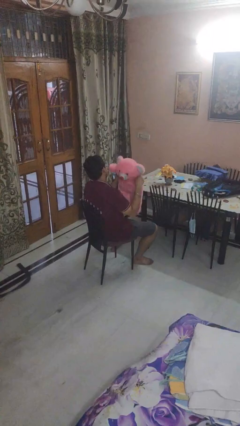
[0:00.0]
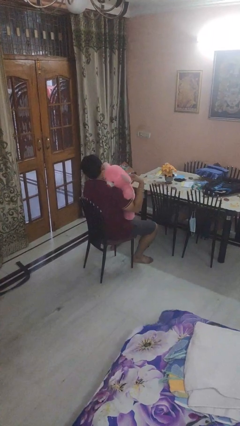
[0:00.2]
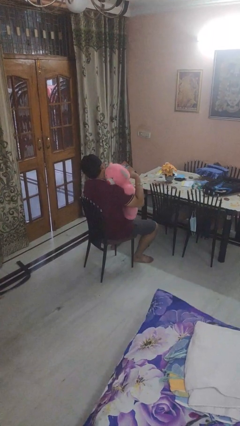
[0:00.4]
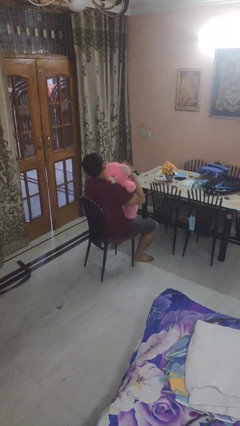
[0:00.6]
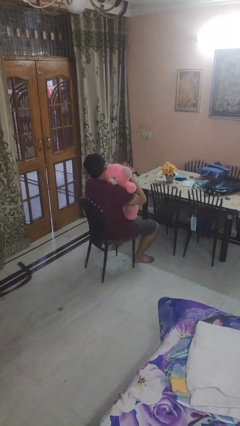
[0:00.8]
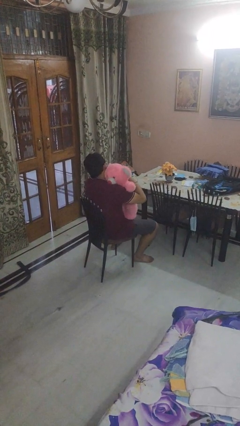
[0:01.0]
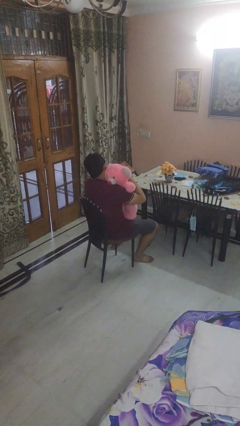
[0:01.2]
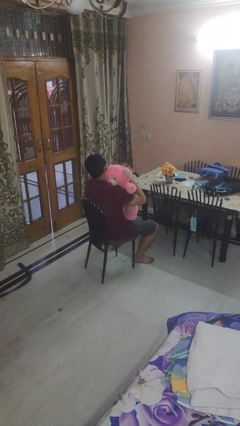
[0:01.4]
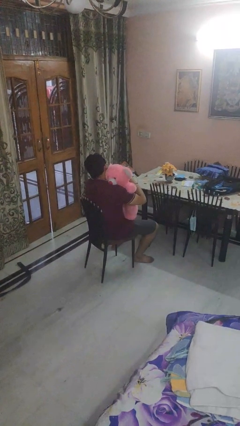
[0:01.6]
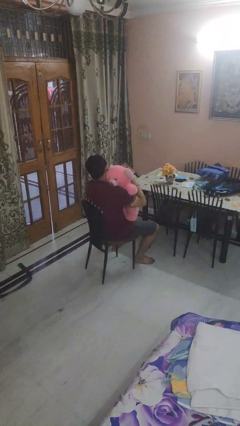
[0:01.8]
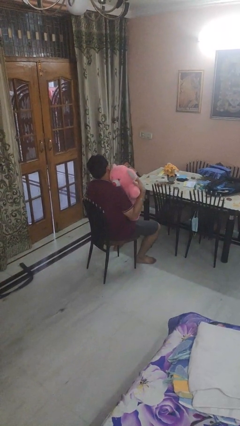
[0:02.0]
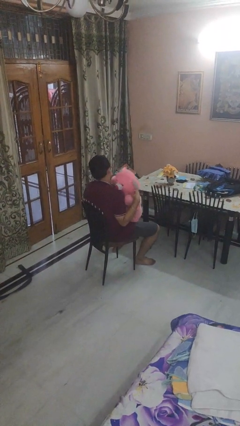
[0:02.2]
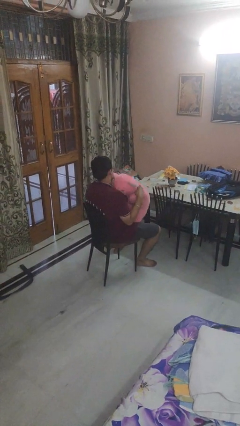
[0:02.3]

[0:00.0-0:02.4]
person hugs stuffed animal

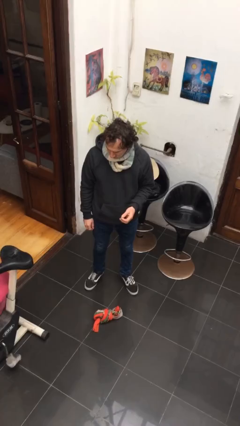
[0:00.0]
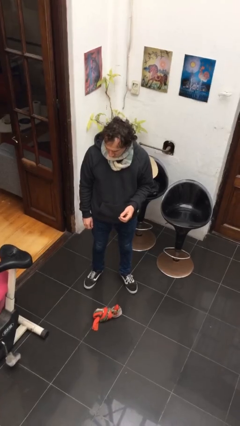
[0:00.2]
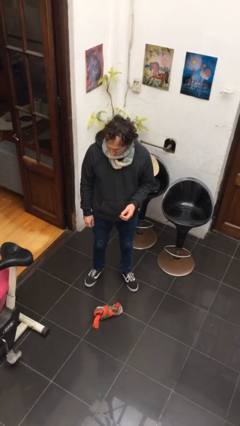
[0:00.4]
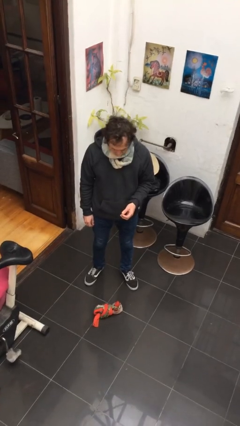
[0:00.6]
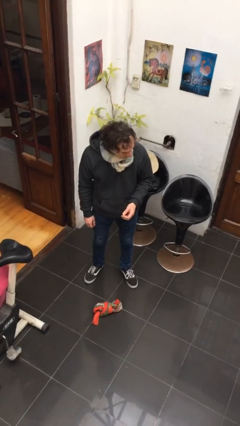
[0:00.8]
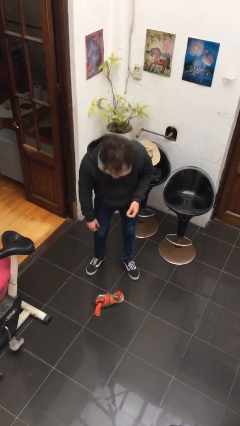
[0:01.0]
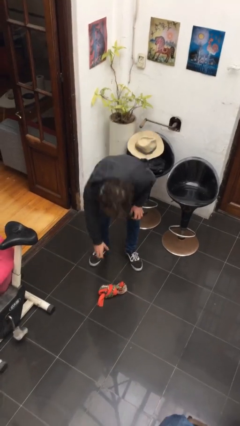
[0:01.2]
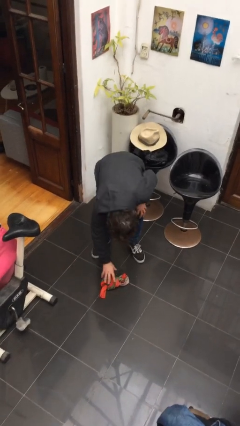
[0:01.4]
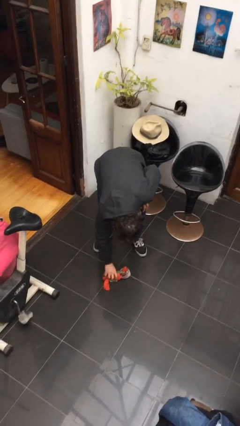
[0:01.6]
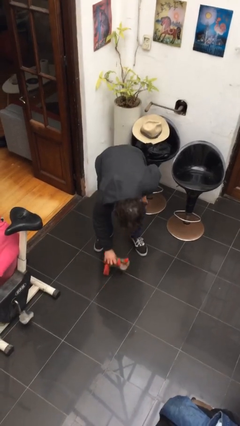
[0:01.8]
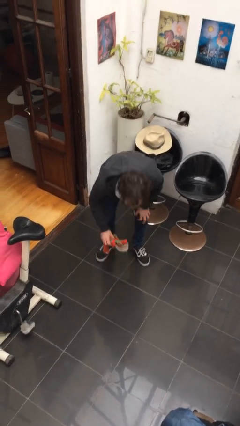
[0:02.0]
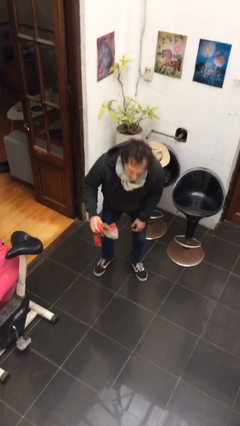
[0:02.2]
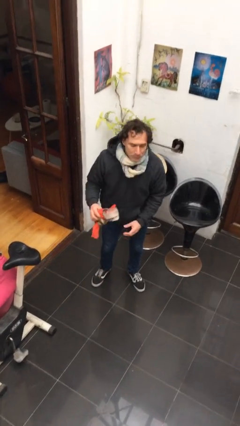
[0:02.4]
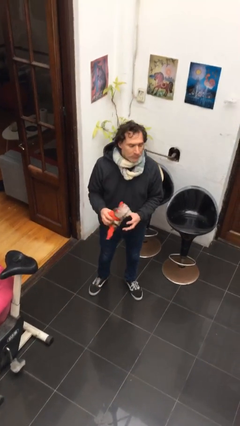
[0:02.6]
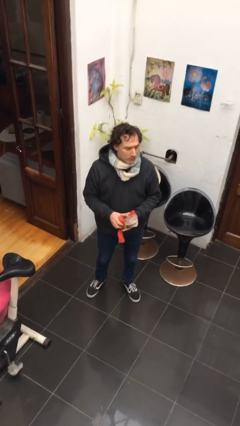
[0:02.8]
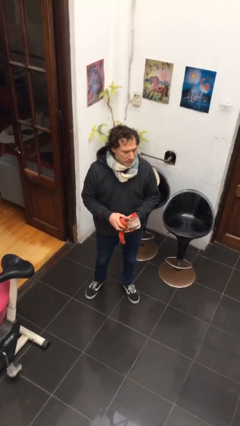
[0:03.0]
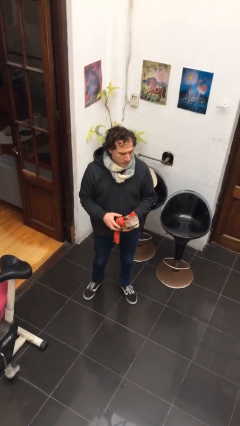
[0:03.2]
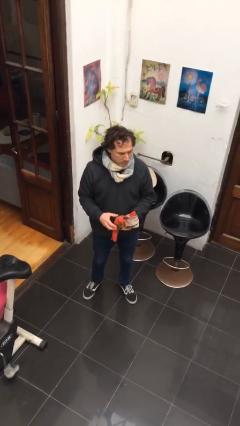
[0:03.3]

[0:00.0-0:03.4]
person picks up object from floor

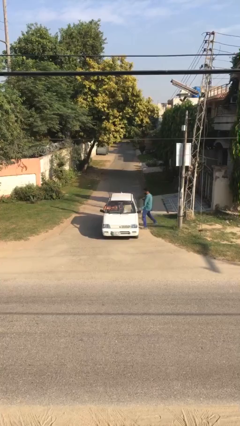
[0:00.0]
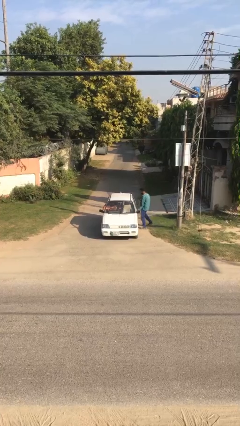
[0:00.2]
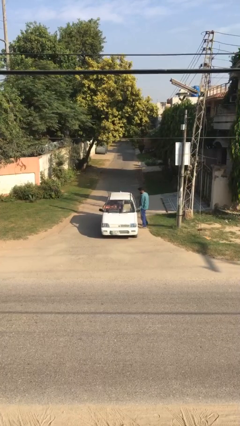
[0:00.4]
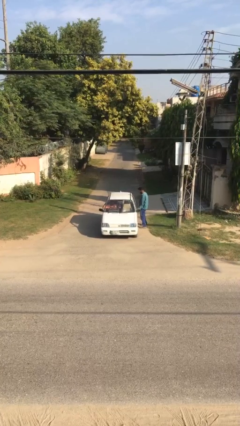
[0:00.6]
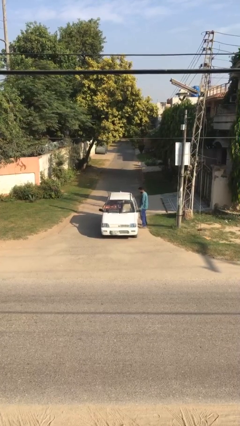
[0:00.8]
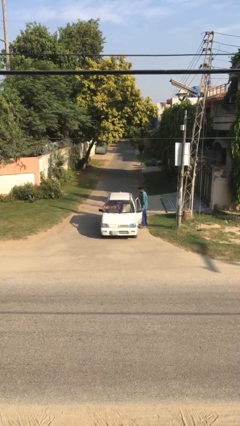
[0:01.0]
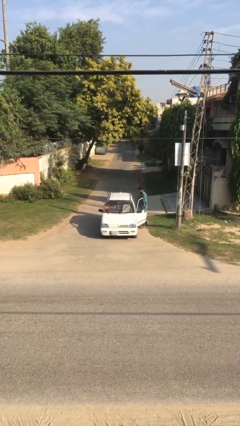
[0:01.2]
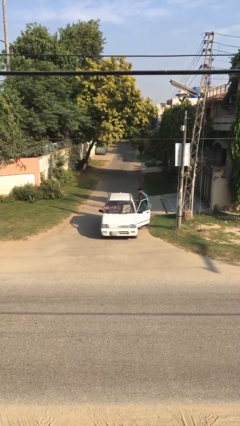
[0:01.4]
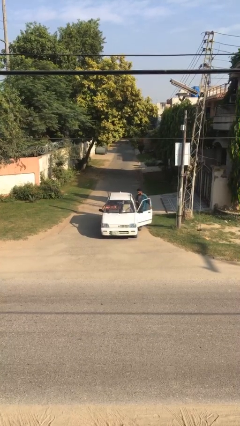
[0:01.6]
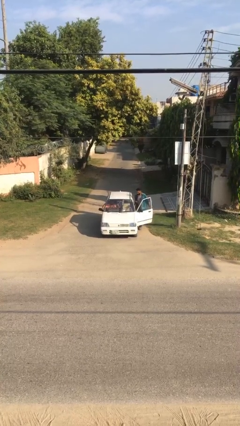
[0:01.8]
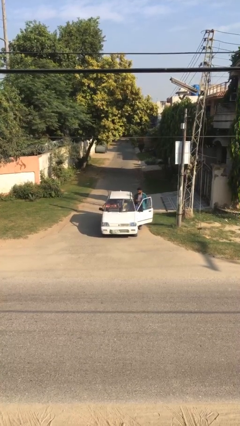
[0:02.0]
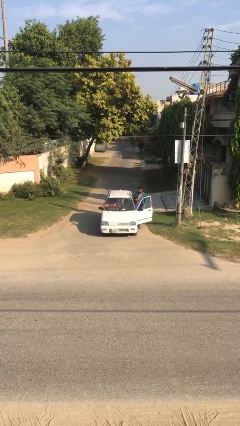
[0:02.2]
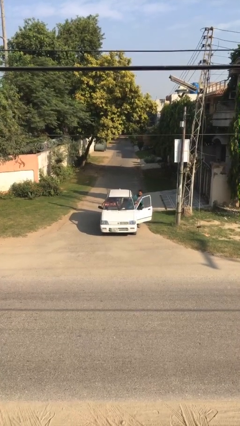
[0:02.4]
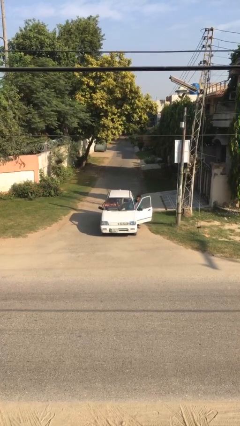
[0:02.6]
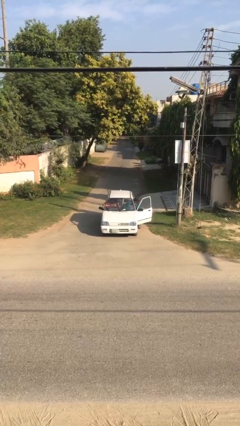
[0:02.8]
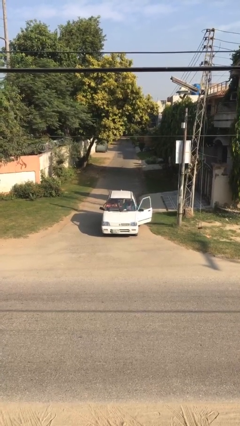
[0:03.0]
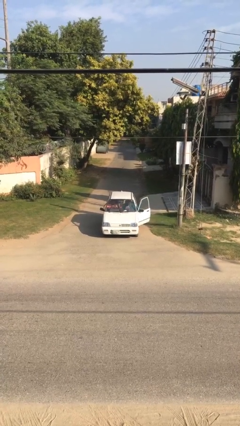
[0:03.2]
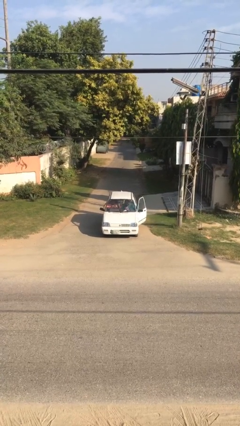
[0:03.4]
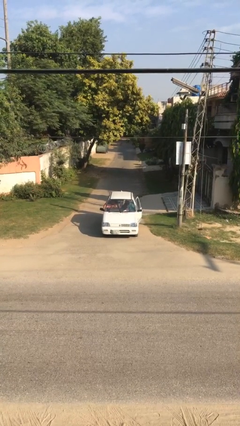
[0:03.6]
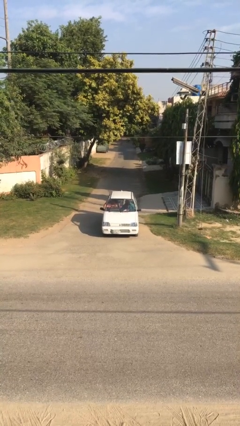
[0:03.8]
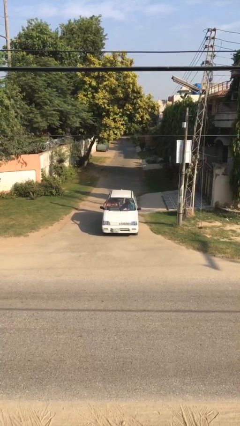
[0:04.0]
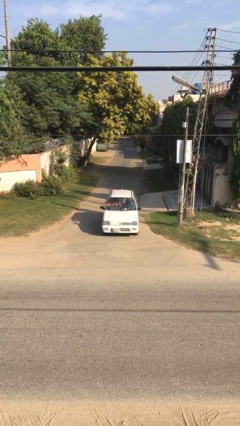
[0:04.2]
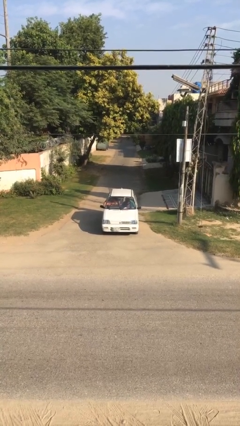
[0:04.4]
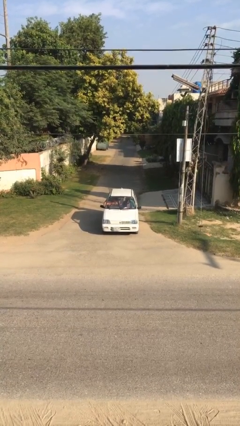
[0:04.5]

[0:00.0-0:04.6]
car picks up person

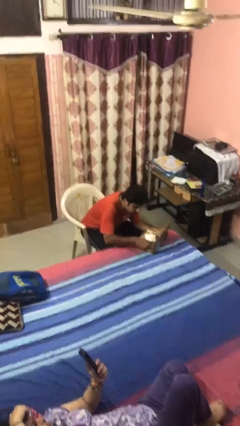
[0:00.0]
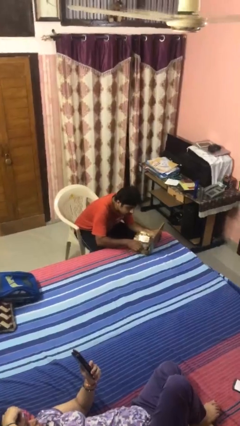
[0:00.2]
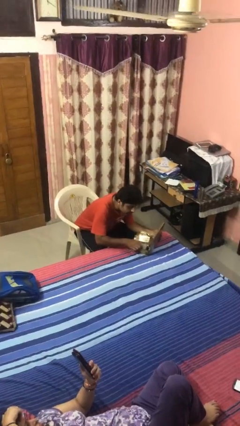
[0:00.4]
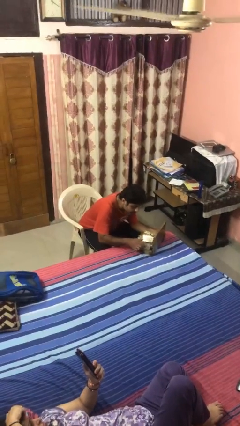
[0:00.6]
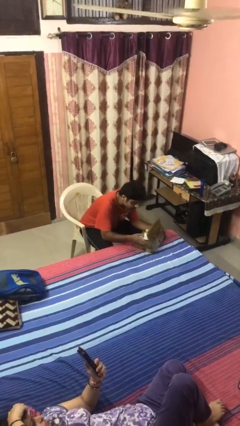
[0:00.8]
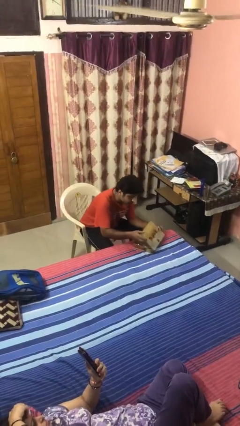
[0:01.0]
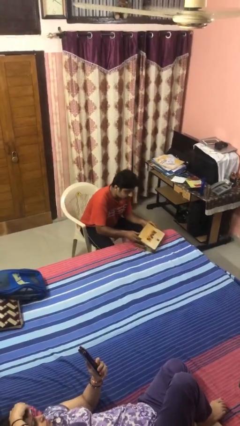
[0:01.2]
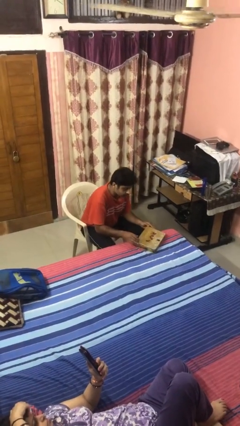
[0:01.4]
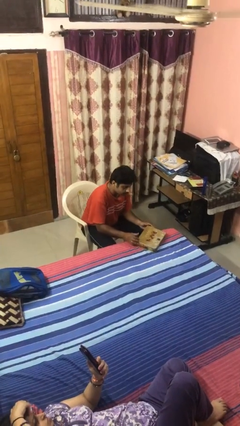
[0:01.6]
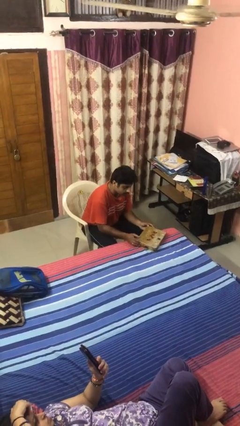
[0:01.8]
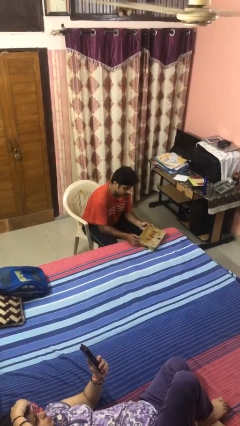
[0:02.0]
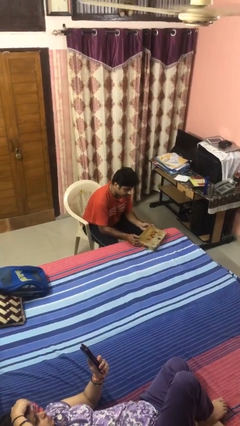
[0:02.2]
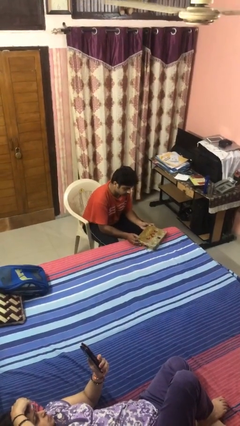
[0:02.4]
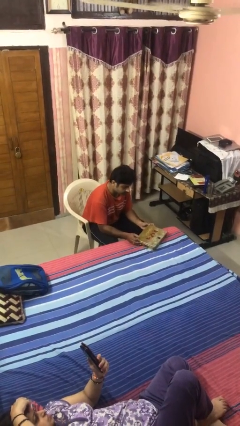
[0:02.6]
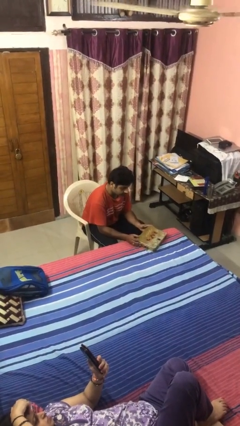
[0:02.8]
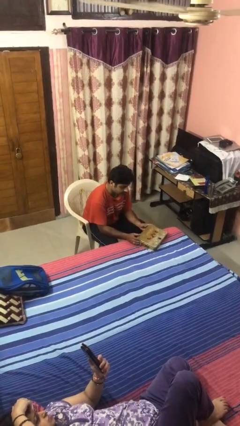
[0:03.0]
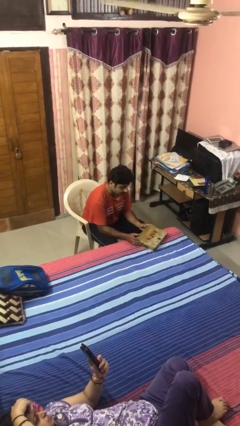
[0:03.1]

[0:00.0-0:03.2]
person closes jewelry box

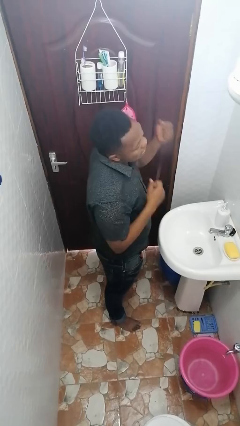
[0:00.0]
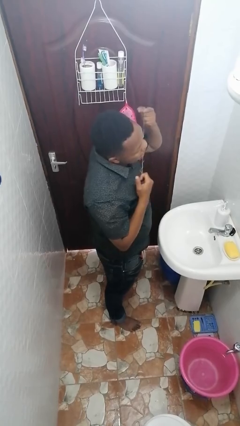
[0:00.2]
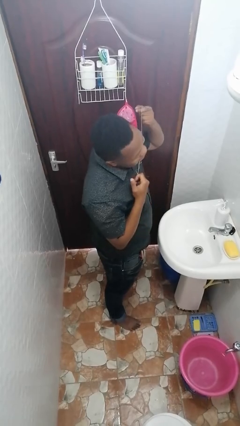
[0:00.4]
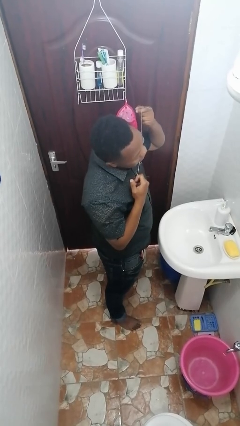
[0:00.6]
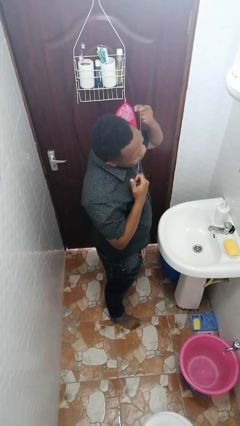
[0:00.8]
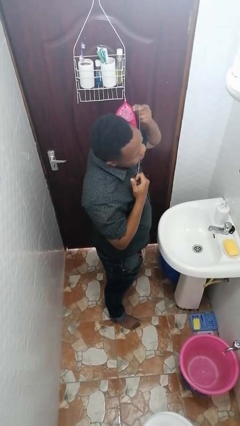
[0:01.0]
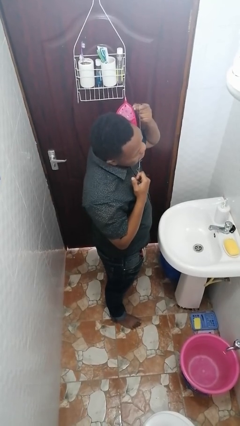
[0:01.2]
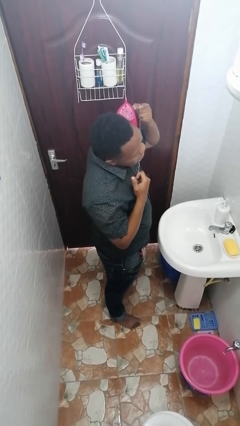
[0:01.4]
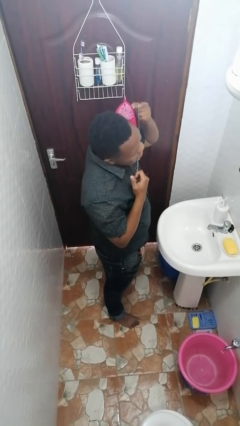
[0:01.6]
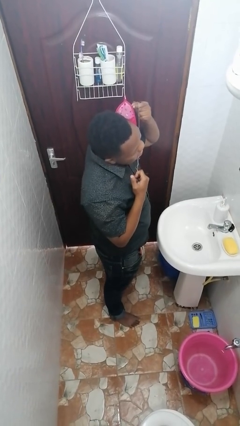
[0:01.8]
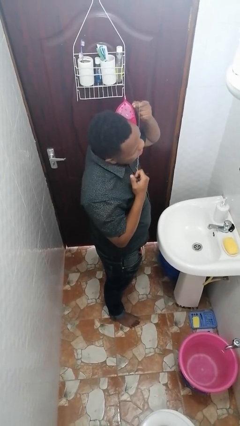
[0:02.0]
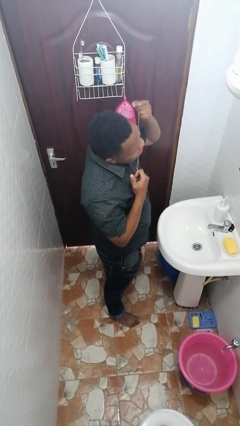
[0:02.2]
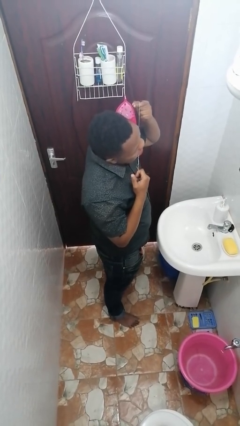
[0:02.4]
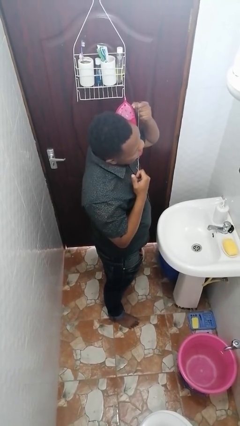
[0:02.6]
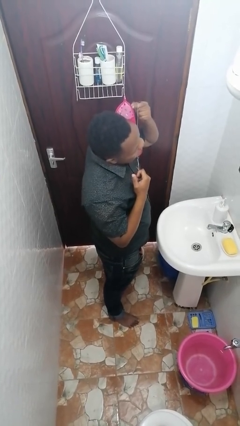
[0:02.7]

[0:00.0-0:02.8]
person flosses

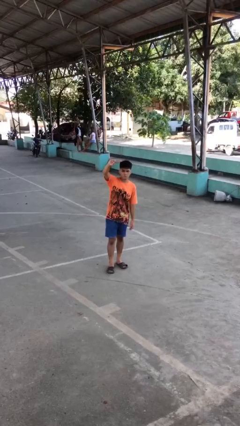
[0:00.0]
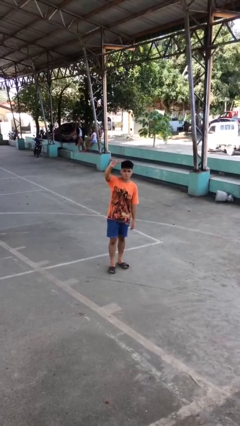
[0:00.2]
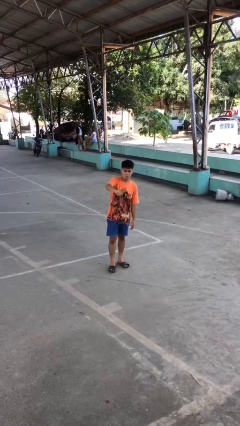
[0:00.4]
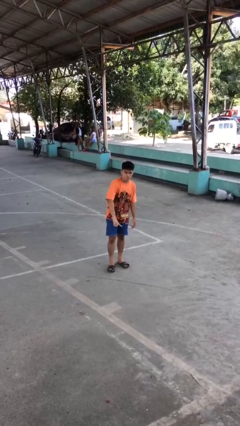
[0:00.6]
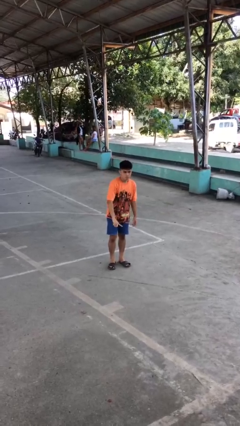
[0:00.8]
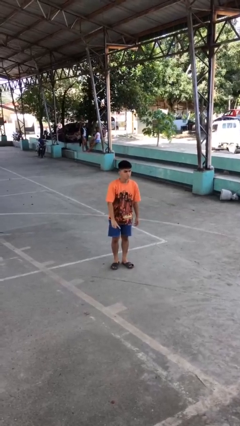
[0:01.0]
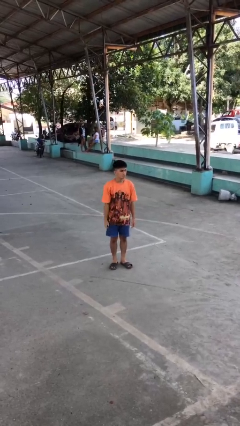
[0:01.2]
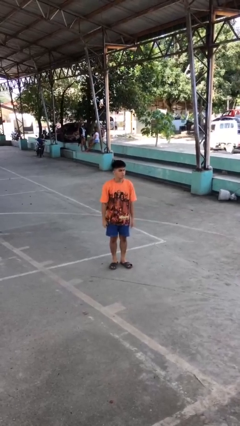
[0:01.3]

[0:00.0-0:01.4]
person gestures swipe down
